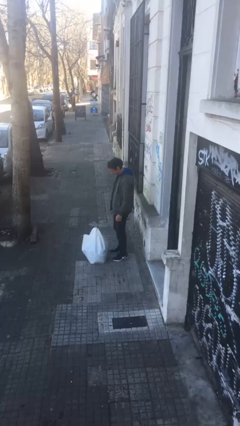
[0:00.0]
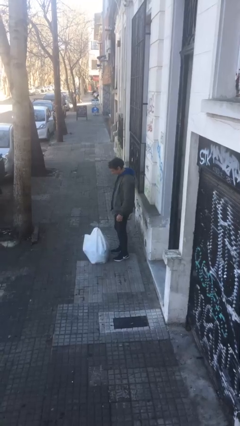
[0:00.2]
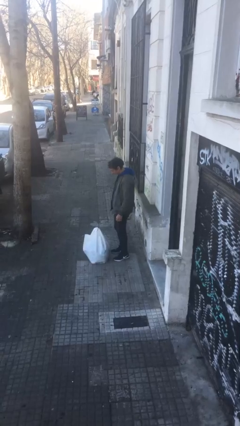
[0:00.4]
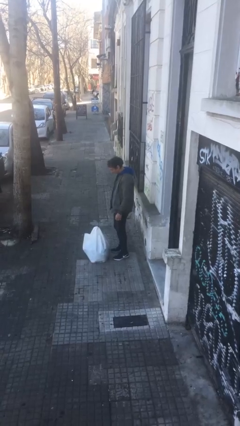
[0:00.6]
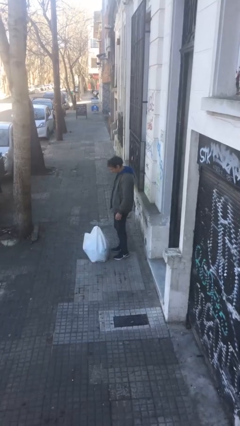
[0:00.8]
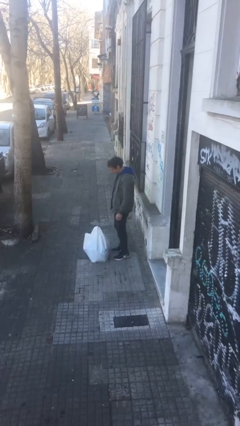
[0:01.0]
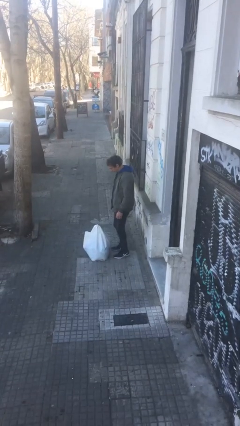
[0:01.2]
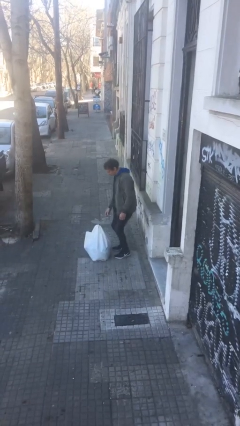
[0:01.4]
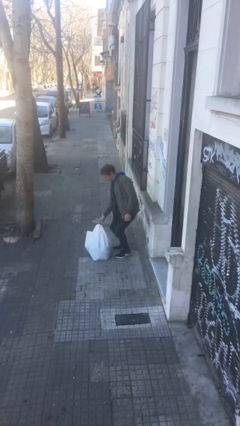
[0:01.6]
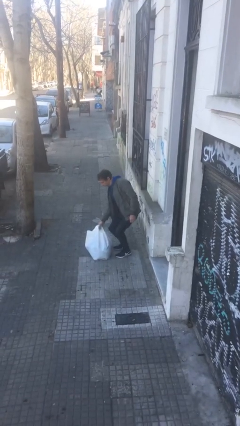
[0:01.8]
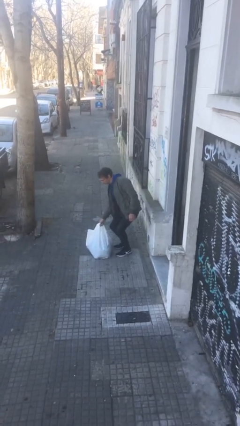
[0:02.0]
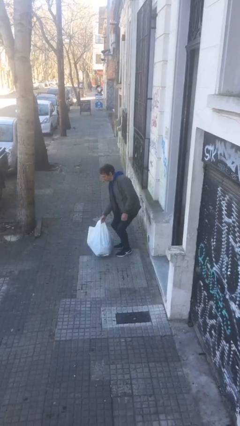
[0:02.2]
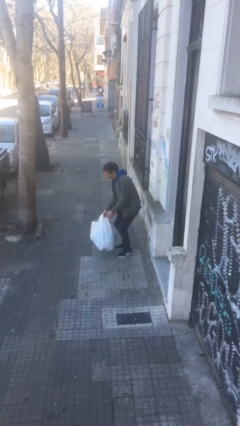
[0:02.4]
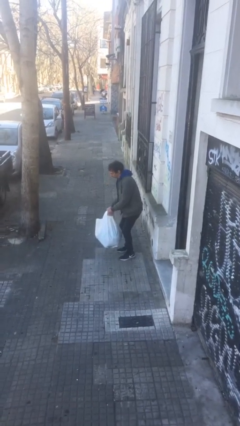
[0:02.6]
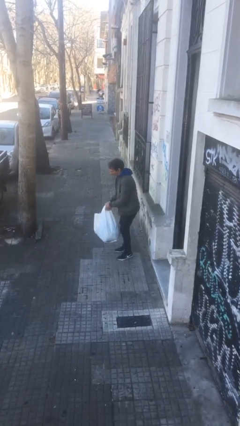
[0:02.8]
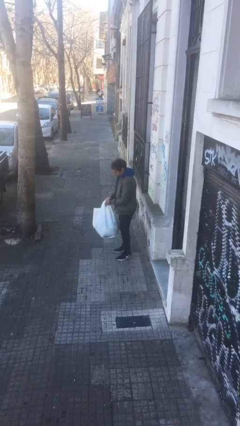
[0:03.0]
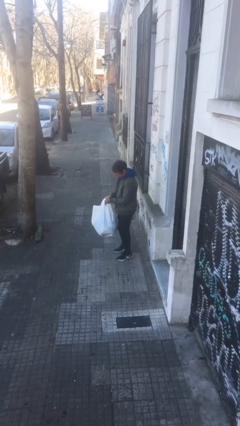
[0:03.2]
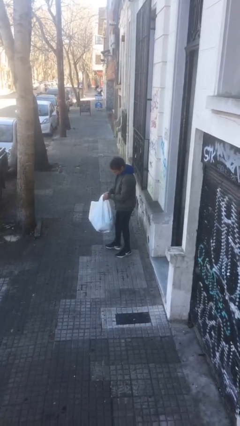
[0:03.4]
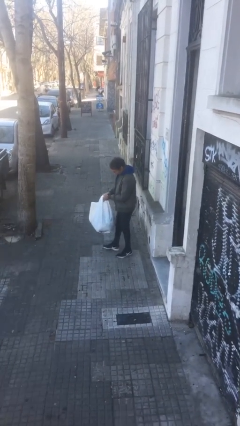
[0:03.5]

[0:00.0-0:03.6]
person picks up object from floor

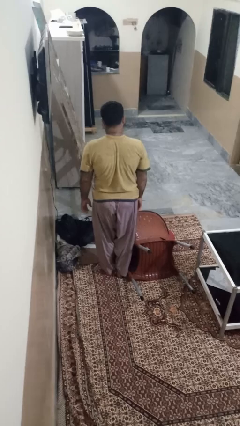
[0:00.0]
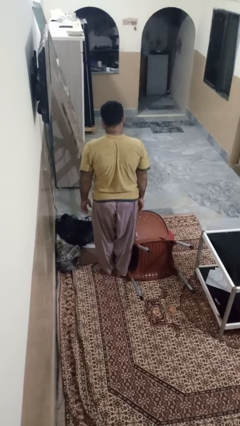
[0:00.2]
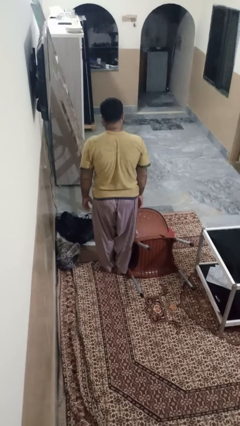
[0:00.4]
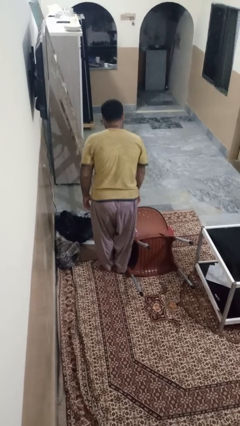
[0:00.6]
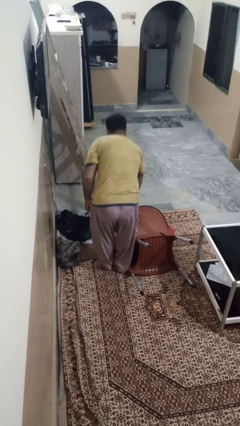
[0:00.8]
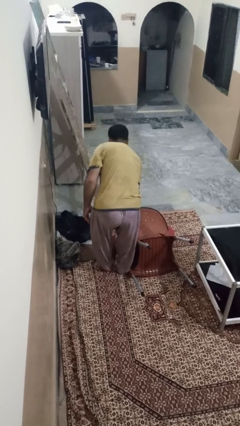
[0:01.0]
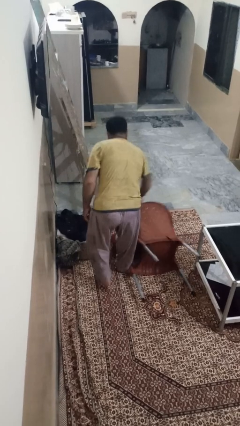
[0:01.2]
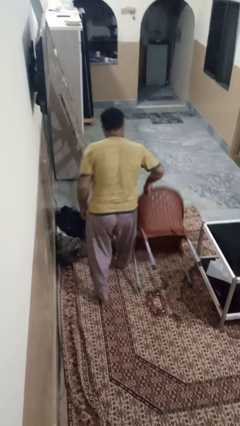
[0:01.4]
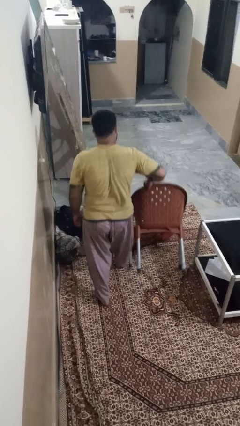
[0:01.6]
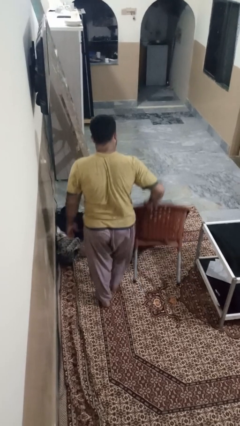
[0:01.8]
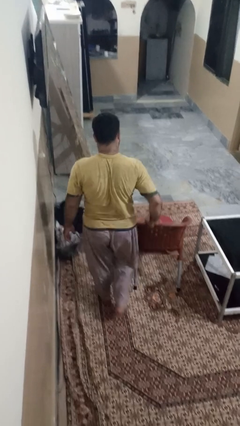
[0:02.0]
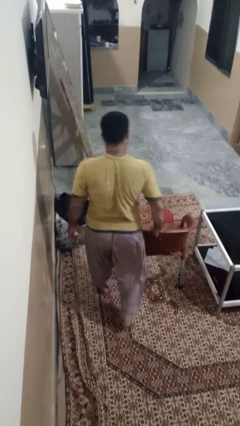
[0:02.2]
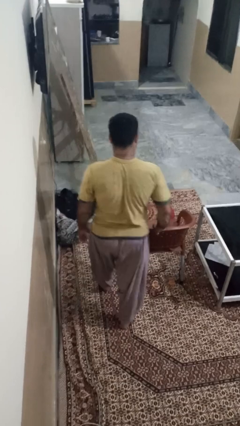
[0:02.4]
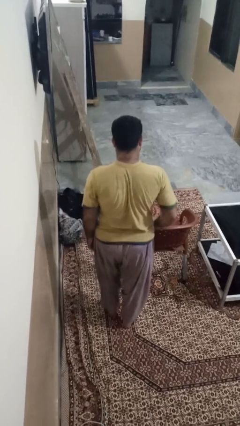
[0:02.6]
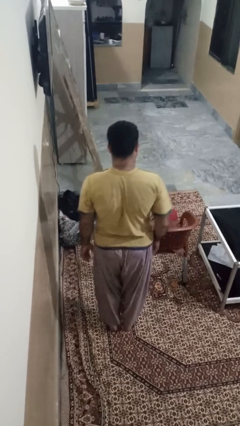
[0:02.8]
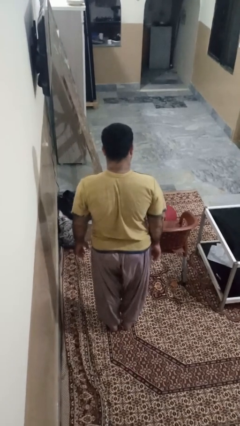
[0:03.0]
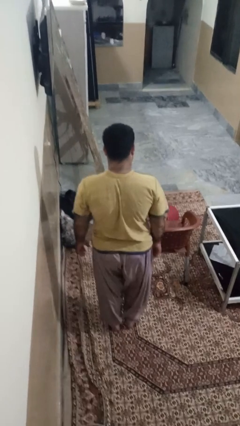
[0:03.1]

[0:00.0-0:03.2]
person sets upright furniture

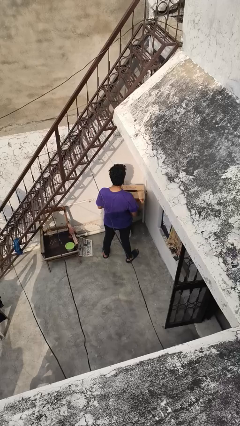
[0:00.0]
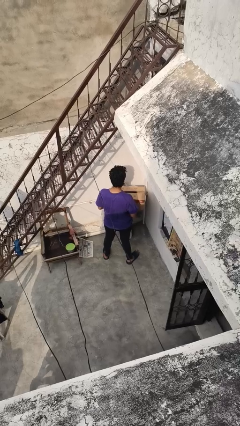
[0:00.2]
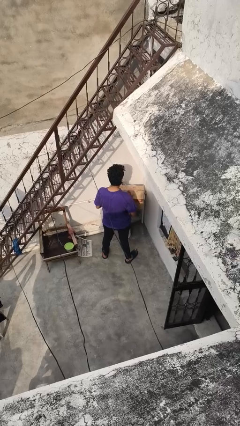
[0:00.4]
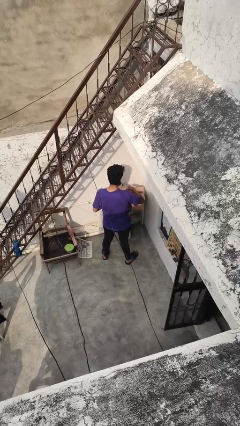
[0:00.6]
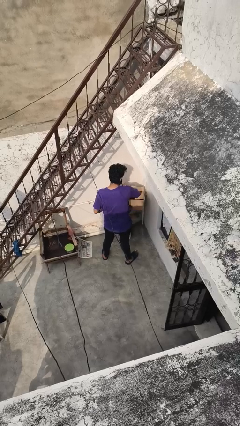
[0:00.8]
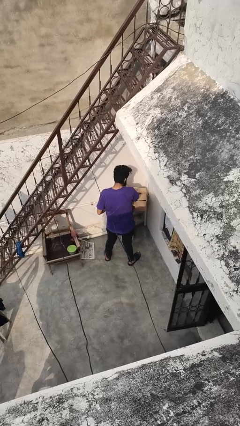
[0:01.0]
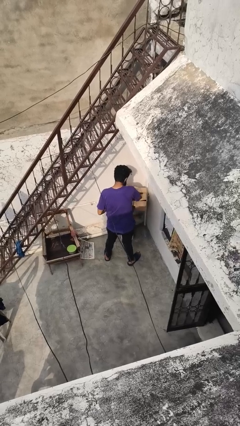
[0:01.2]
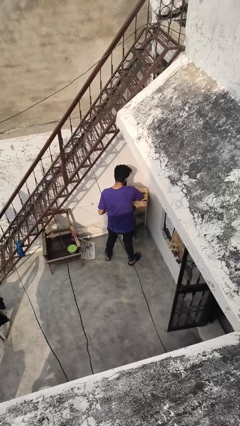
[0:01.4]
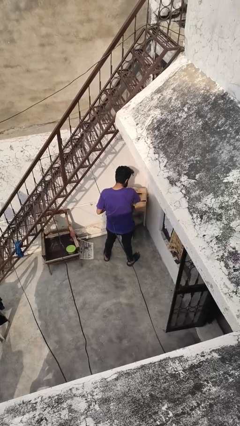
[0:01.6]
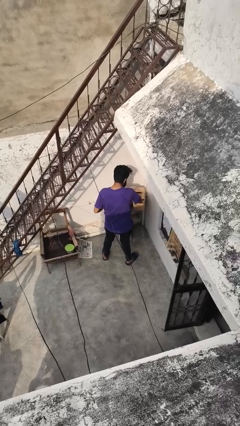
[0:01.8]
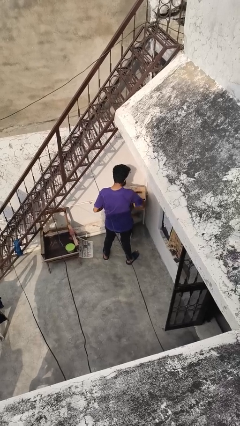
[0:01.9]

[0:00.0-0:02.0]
person searches in box

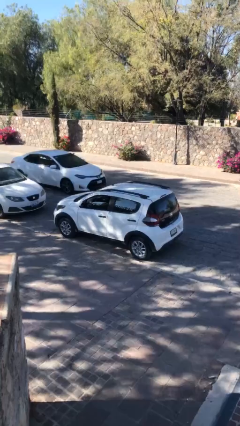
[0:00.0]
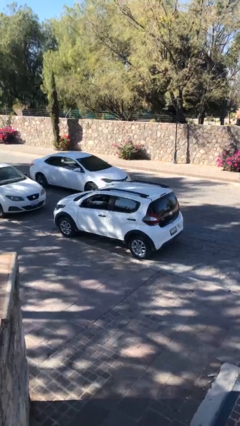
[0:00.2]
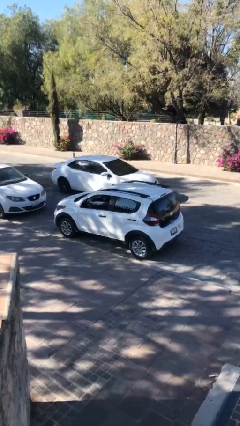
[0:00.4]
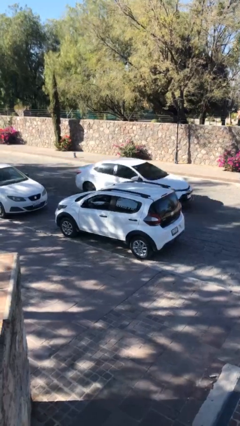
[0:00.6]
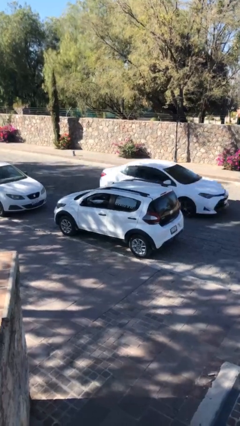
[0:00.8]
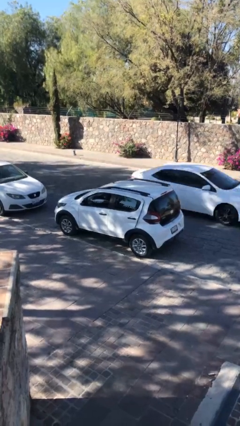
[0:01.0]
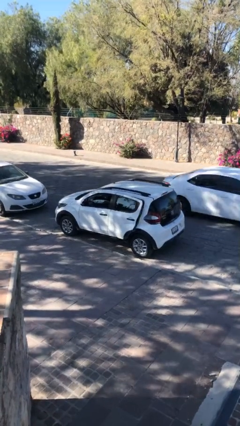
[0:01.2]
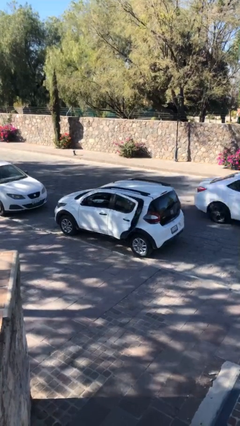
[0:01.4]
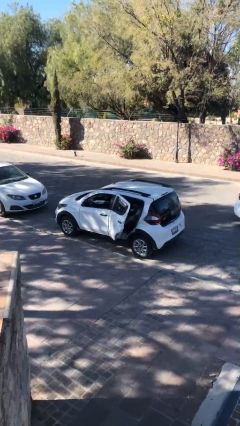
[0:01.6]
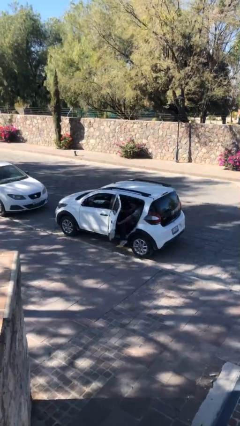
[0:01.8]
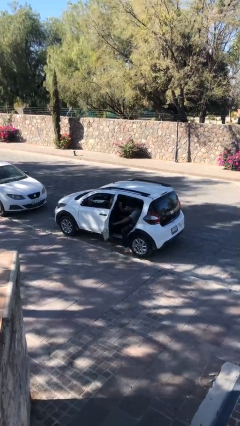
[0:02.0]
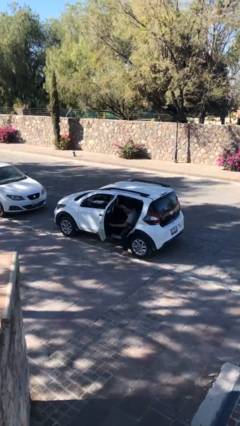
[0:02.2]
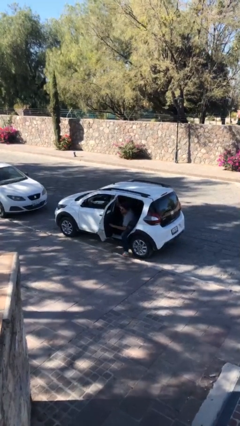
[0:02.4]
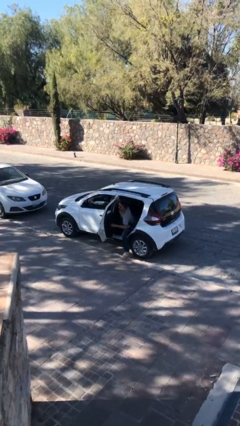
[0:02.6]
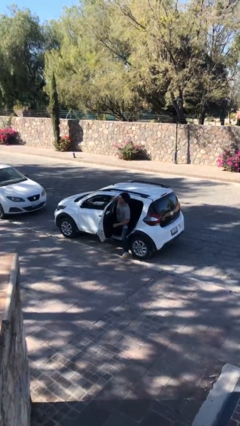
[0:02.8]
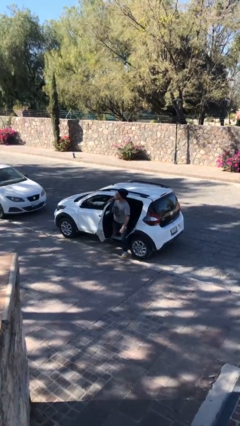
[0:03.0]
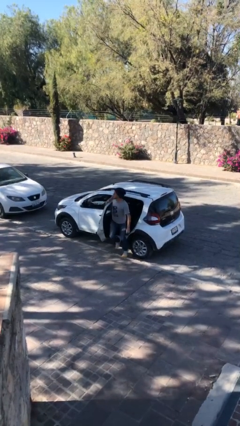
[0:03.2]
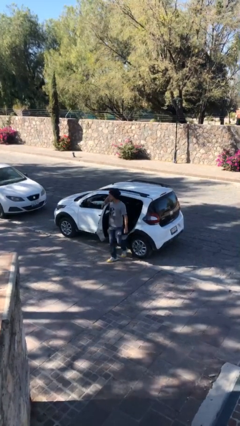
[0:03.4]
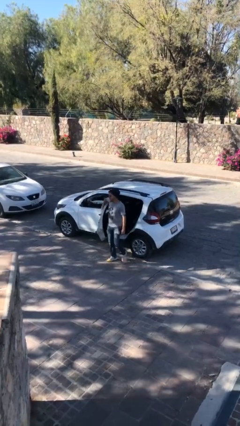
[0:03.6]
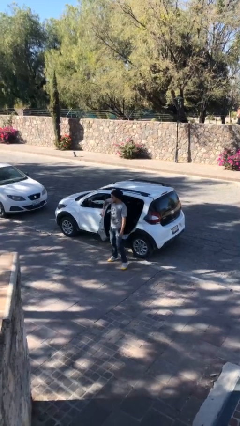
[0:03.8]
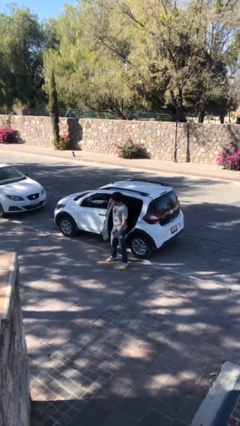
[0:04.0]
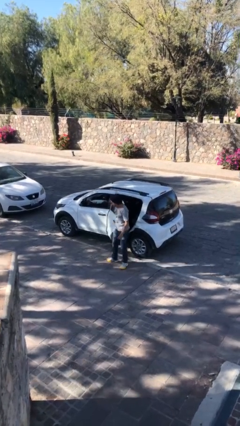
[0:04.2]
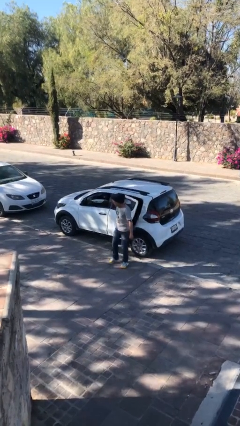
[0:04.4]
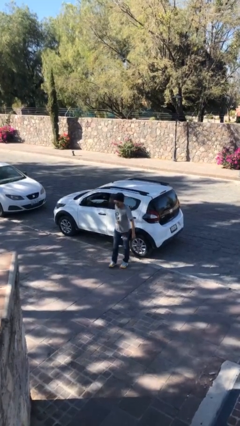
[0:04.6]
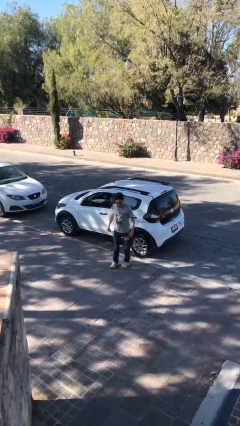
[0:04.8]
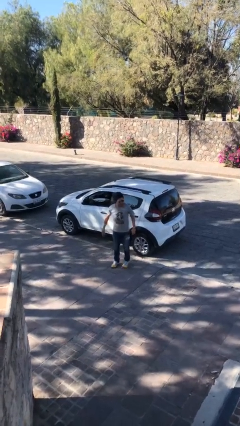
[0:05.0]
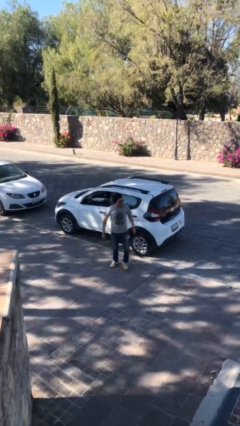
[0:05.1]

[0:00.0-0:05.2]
car drops off person

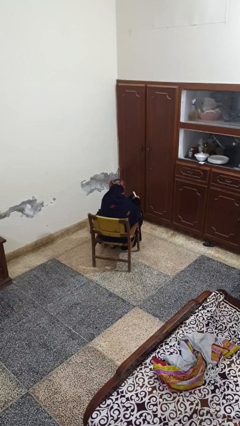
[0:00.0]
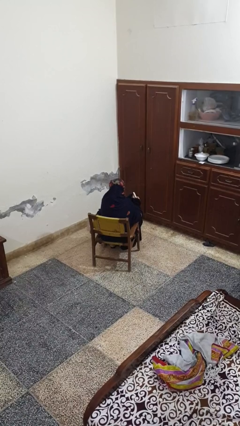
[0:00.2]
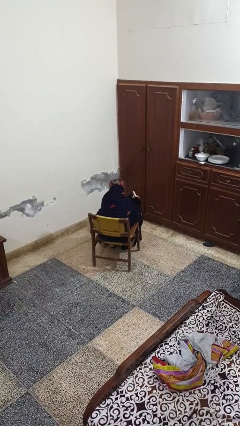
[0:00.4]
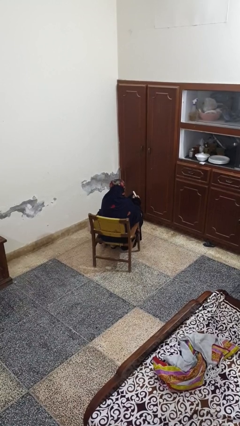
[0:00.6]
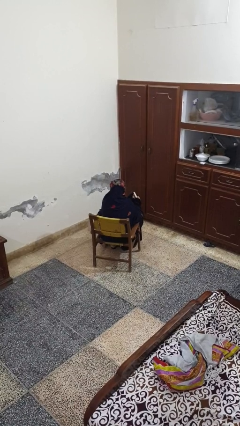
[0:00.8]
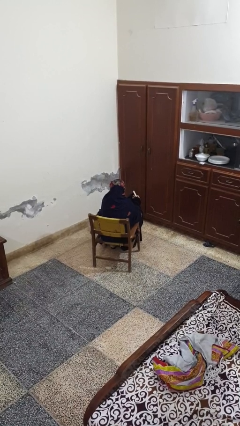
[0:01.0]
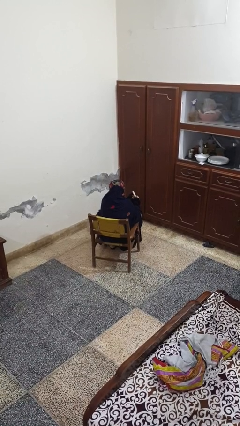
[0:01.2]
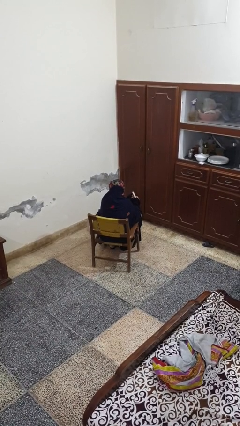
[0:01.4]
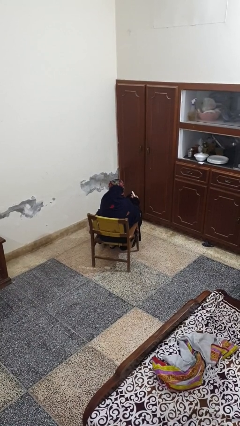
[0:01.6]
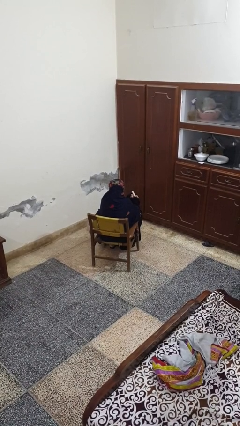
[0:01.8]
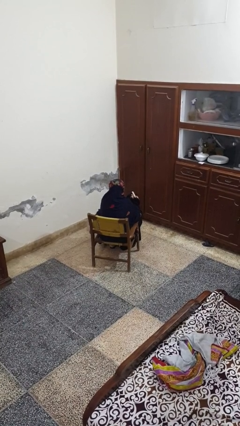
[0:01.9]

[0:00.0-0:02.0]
person files fingernails

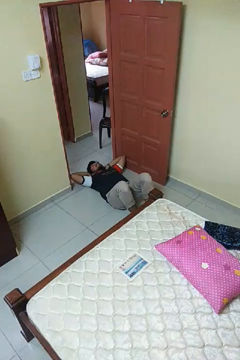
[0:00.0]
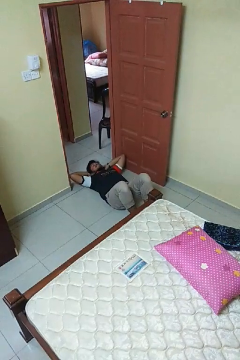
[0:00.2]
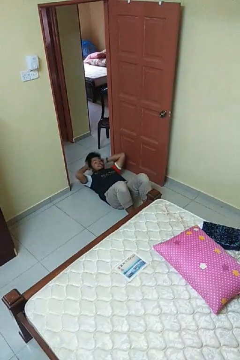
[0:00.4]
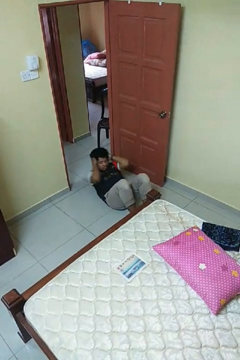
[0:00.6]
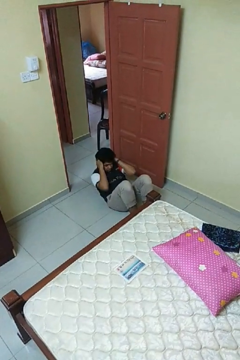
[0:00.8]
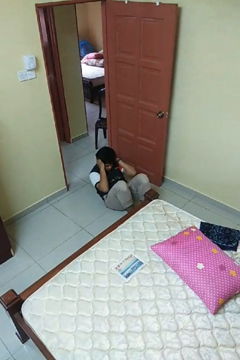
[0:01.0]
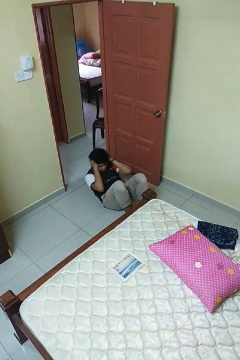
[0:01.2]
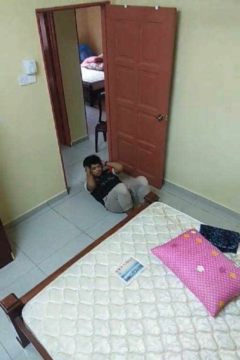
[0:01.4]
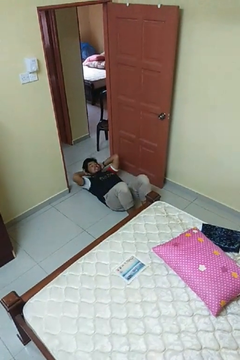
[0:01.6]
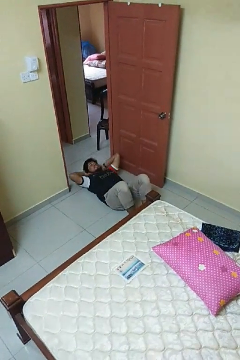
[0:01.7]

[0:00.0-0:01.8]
person exercises with situp
